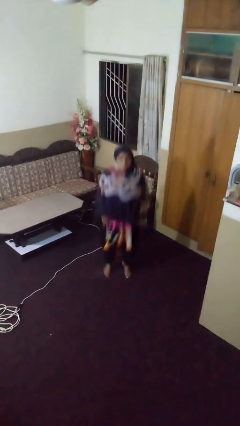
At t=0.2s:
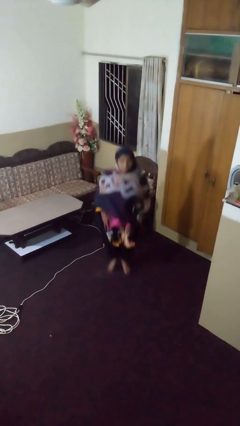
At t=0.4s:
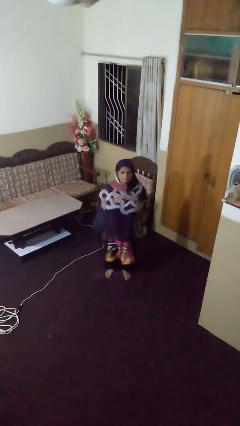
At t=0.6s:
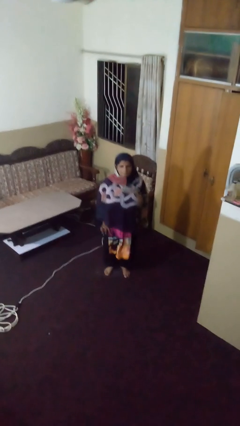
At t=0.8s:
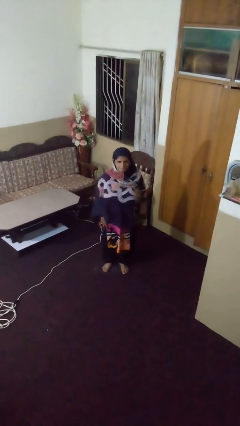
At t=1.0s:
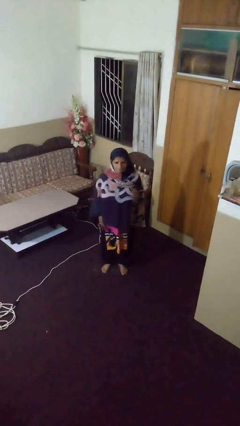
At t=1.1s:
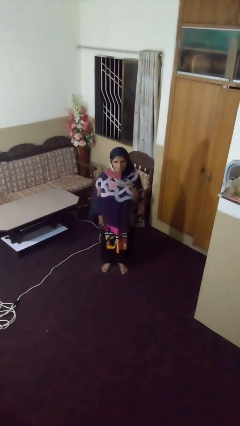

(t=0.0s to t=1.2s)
person jumps

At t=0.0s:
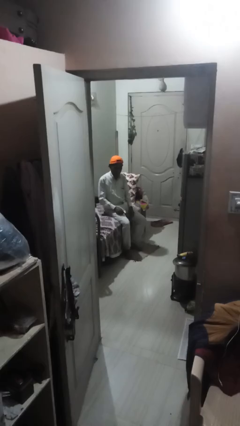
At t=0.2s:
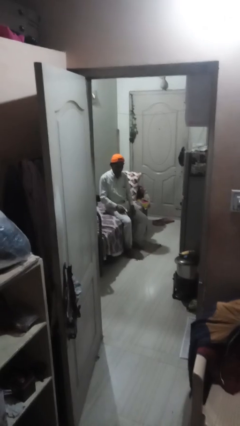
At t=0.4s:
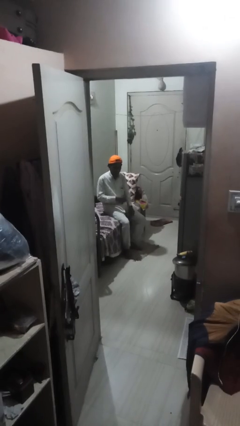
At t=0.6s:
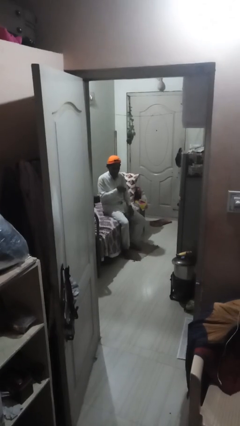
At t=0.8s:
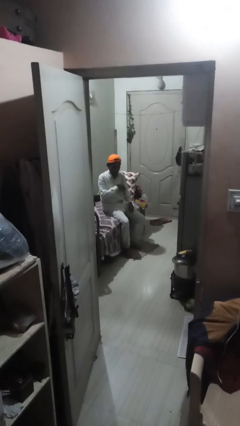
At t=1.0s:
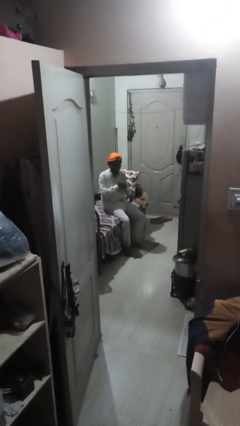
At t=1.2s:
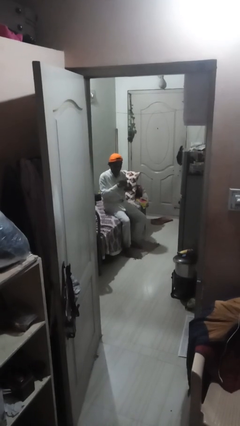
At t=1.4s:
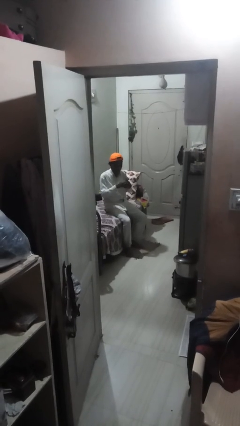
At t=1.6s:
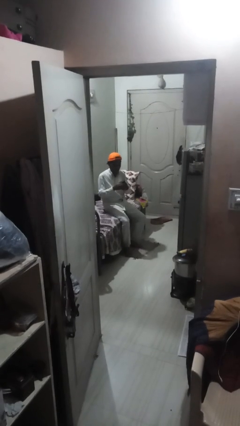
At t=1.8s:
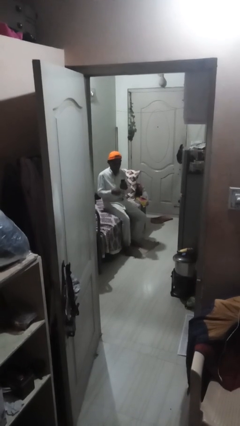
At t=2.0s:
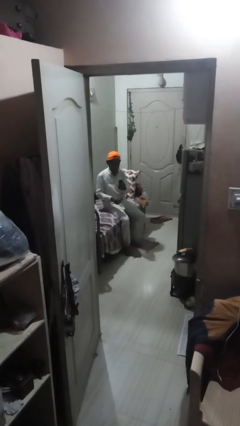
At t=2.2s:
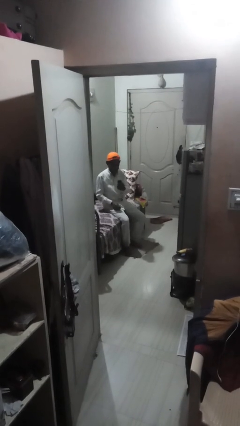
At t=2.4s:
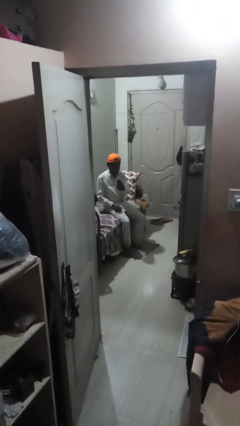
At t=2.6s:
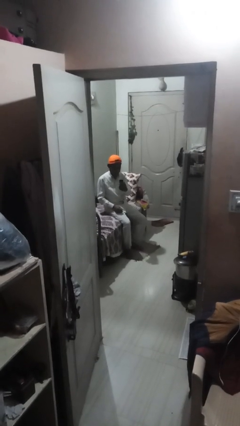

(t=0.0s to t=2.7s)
person takes phone from pocket

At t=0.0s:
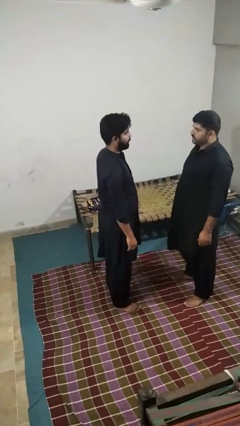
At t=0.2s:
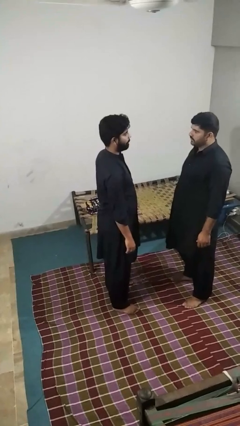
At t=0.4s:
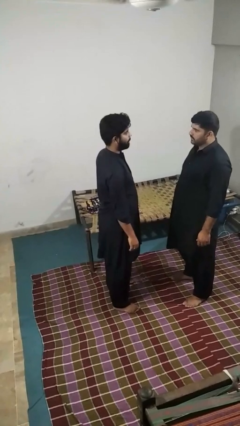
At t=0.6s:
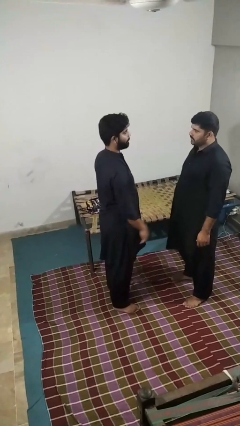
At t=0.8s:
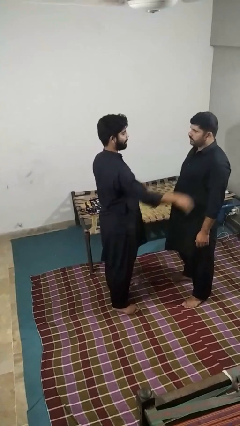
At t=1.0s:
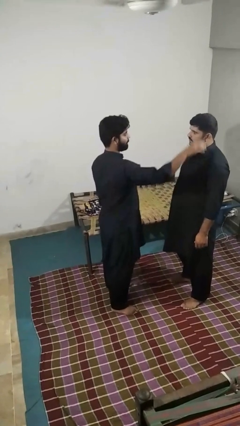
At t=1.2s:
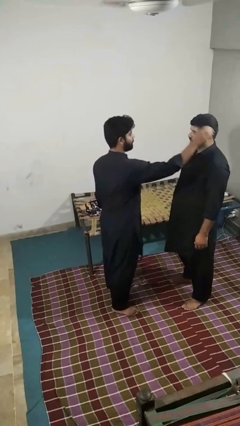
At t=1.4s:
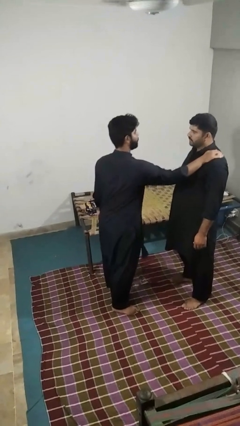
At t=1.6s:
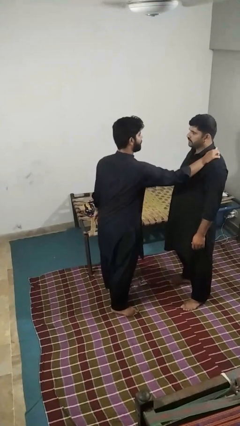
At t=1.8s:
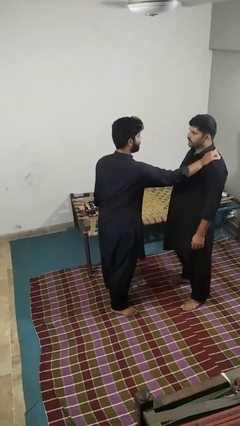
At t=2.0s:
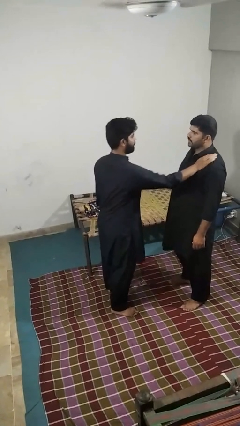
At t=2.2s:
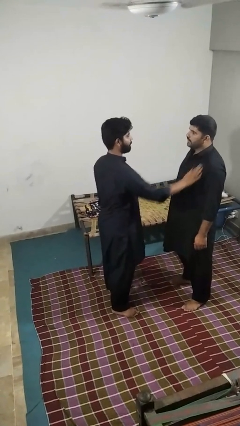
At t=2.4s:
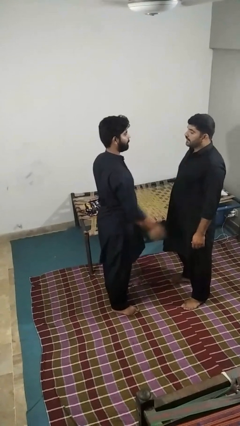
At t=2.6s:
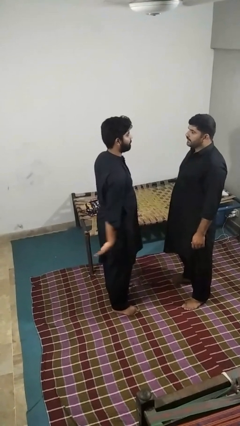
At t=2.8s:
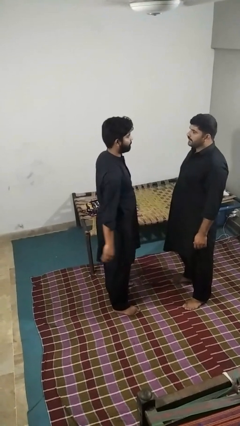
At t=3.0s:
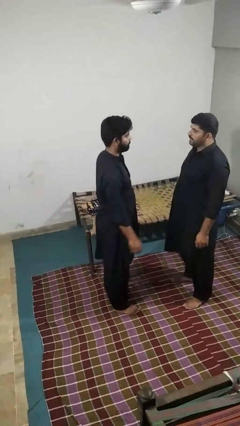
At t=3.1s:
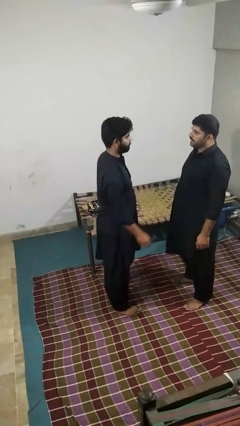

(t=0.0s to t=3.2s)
person pounds shoulders of person

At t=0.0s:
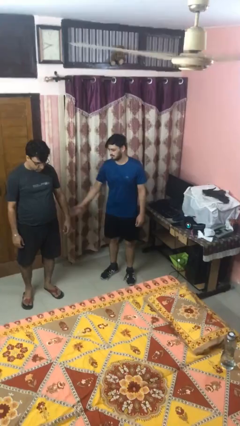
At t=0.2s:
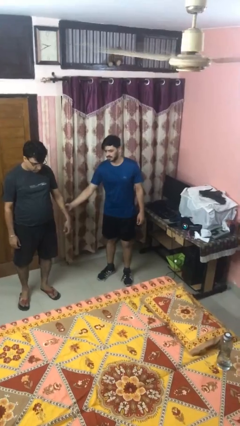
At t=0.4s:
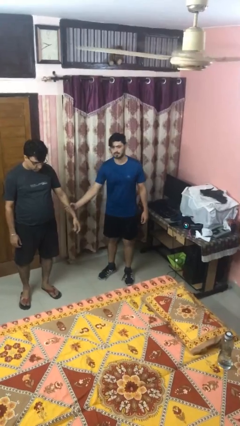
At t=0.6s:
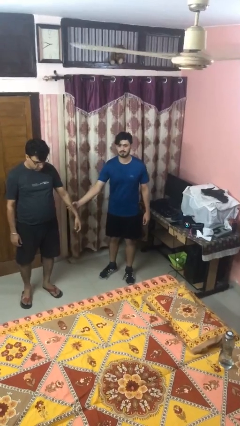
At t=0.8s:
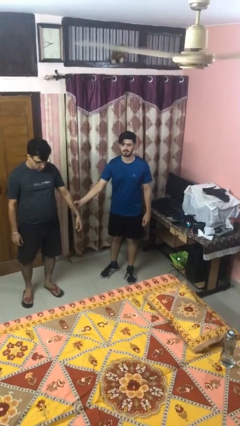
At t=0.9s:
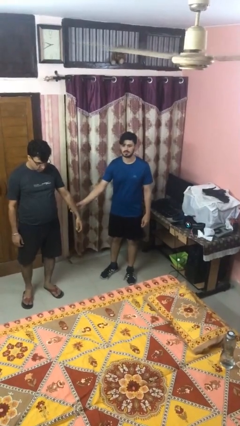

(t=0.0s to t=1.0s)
person grabs person by forearm

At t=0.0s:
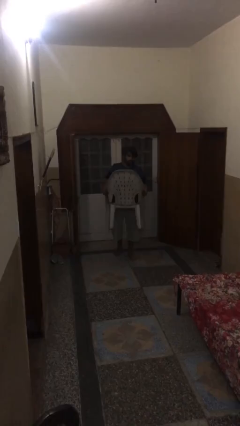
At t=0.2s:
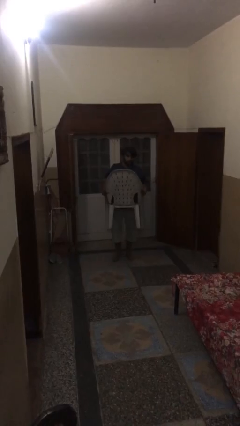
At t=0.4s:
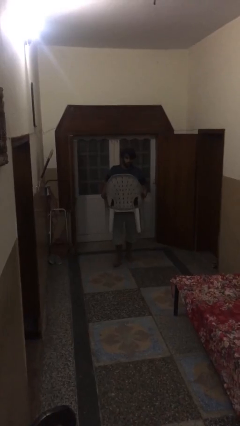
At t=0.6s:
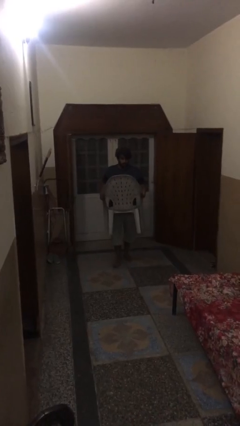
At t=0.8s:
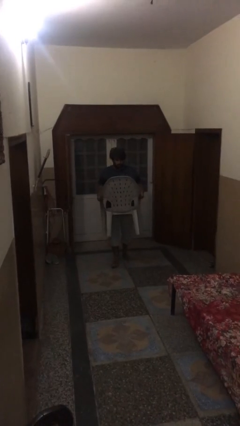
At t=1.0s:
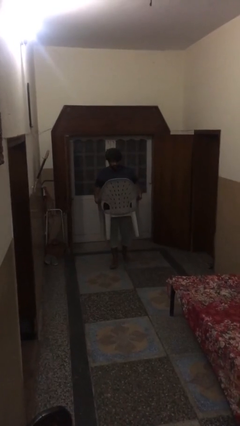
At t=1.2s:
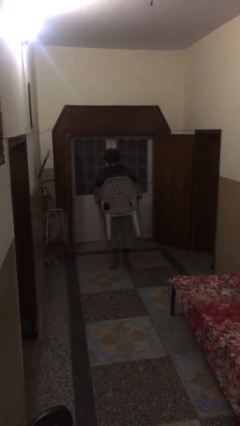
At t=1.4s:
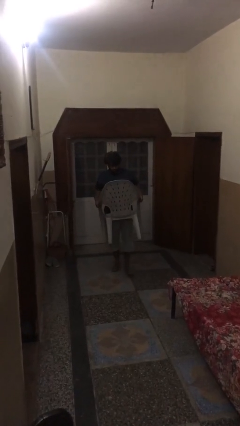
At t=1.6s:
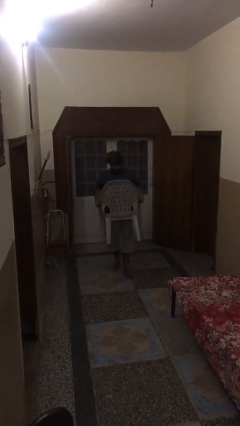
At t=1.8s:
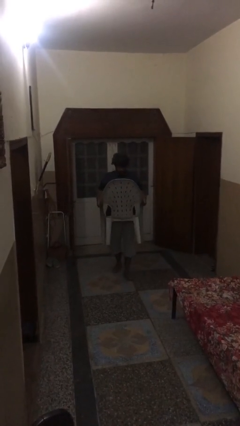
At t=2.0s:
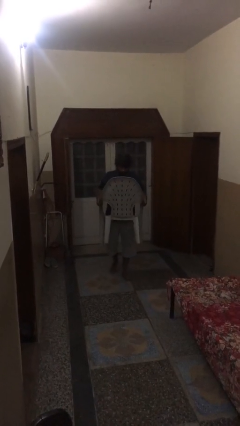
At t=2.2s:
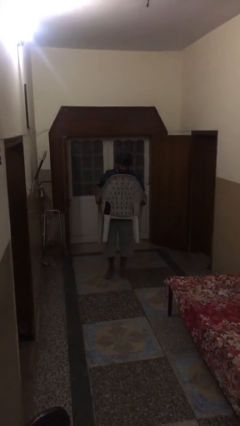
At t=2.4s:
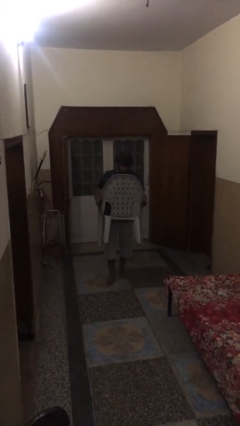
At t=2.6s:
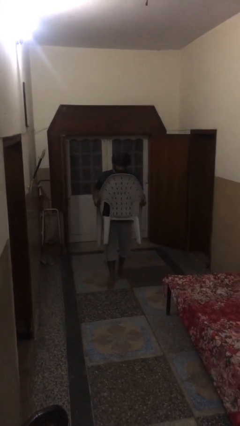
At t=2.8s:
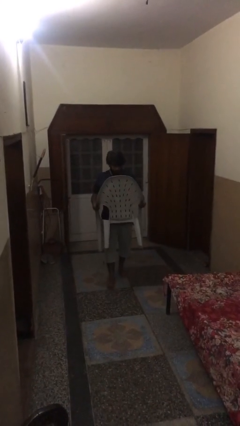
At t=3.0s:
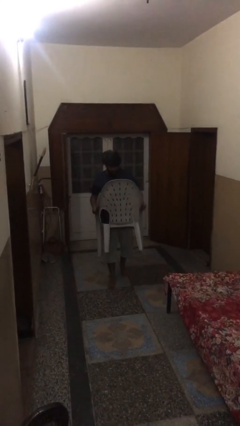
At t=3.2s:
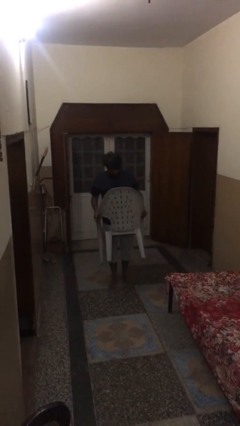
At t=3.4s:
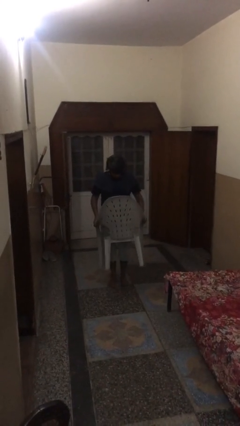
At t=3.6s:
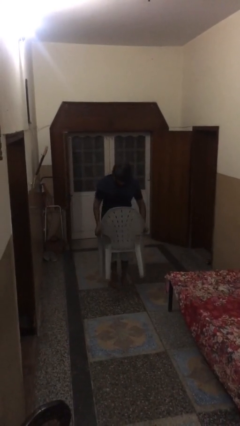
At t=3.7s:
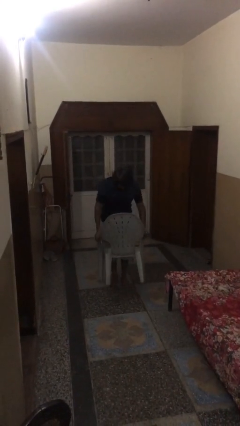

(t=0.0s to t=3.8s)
person carries heavy object

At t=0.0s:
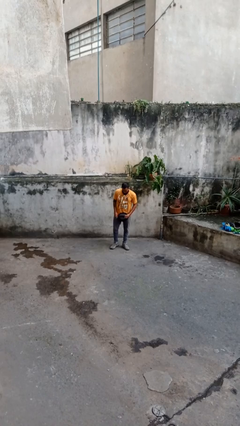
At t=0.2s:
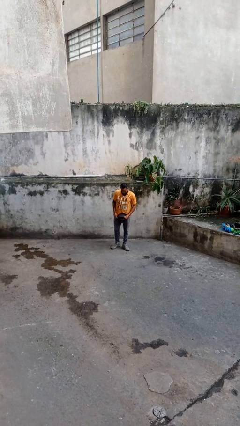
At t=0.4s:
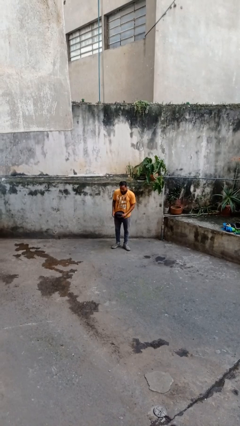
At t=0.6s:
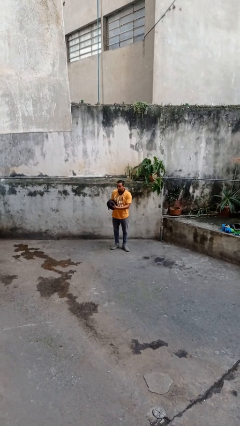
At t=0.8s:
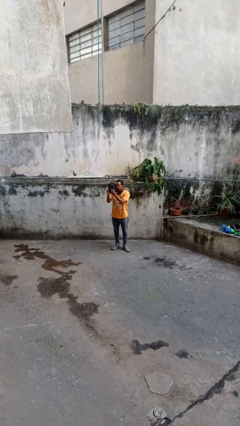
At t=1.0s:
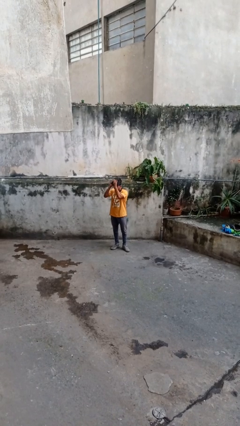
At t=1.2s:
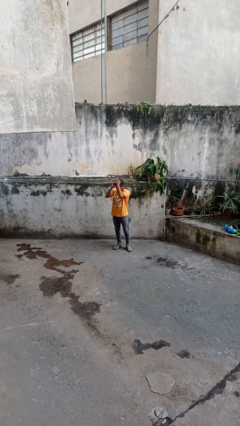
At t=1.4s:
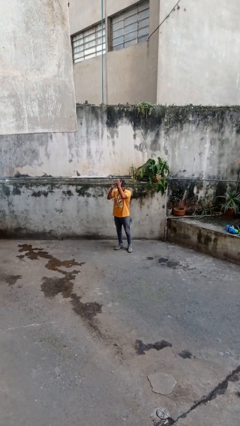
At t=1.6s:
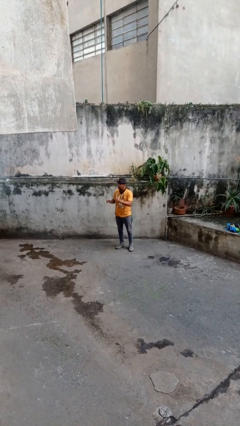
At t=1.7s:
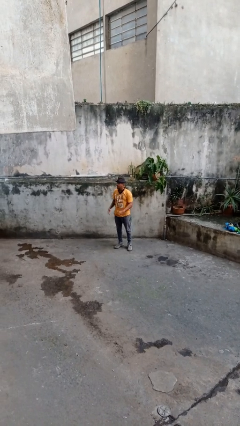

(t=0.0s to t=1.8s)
person puts on hat

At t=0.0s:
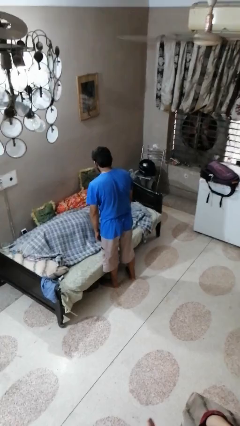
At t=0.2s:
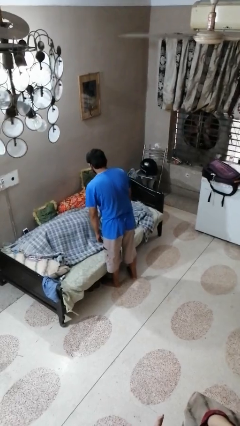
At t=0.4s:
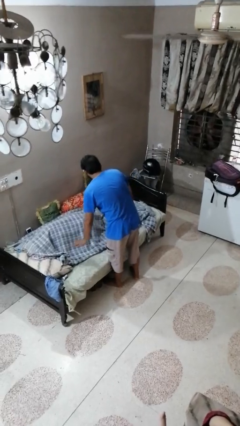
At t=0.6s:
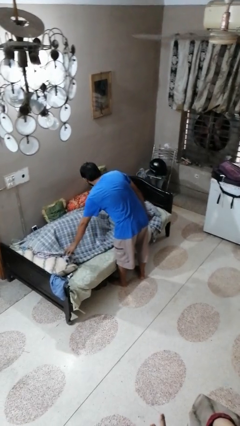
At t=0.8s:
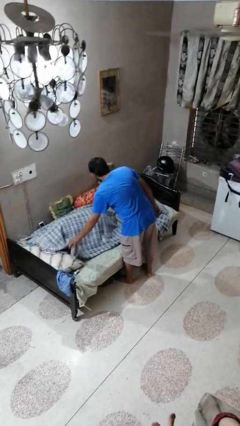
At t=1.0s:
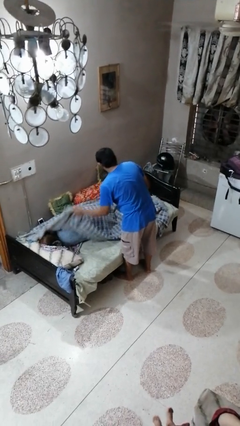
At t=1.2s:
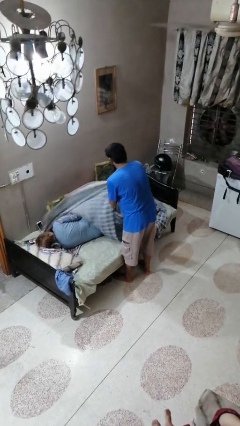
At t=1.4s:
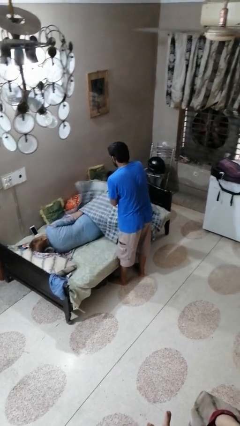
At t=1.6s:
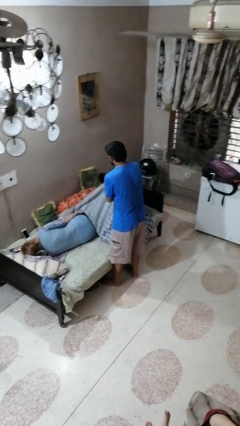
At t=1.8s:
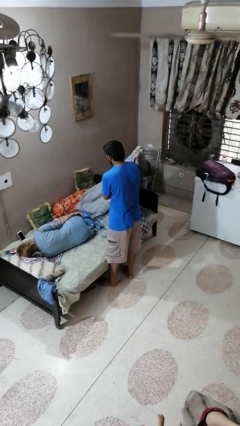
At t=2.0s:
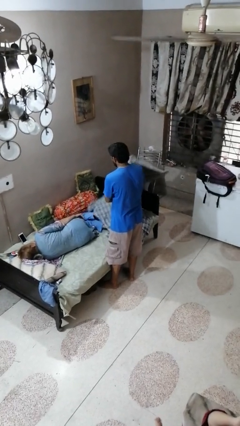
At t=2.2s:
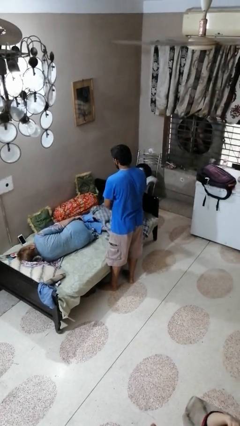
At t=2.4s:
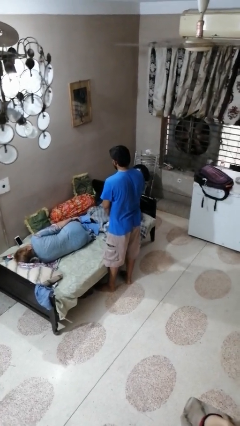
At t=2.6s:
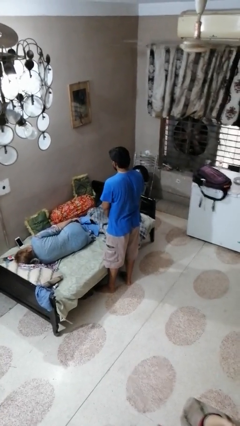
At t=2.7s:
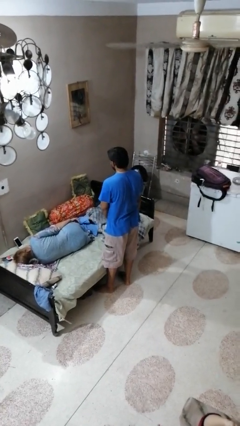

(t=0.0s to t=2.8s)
person uncovers friend with blanket

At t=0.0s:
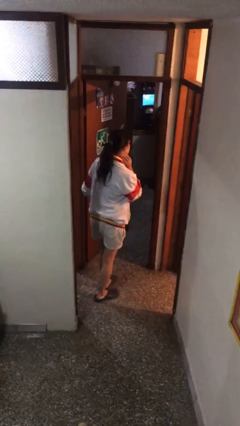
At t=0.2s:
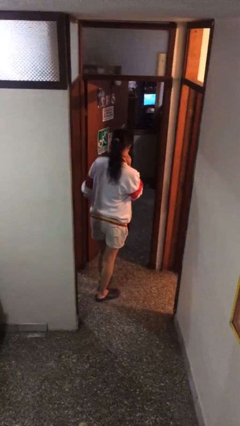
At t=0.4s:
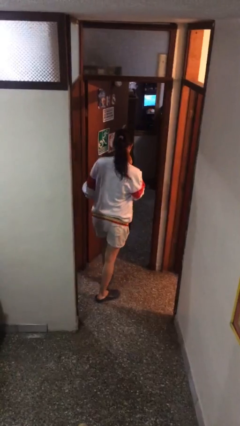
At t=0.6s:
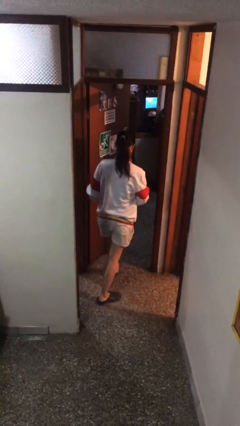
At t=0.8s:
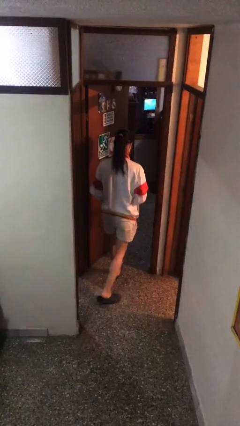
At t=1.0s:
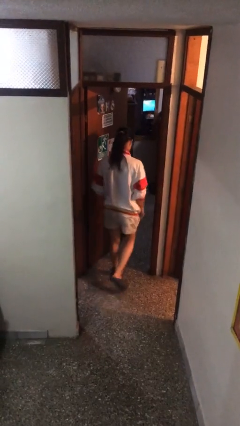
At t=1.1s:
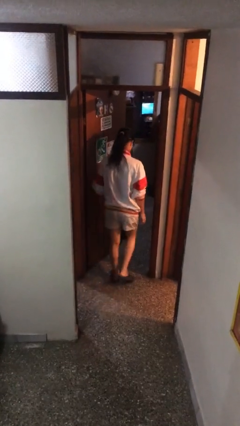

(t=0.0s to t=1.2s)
person exits scene through structure
